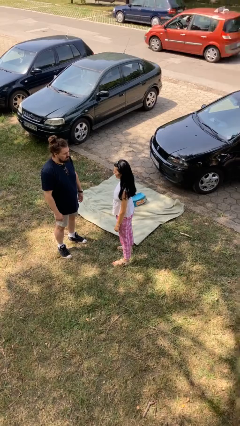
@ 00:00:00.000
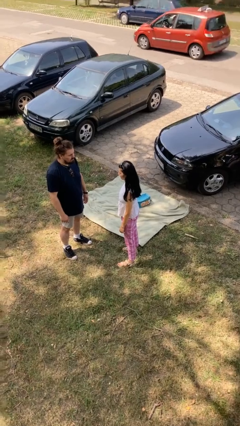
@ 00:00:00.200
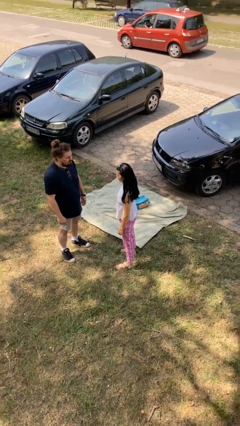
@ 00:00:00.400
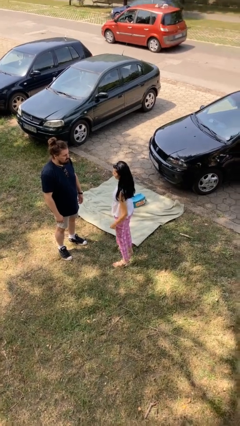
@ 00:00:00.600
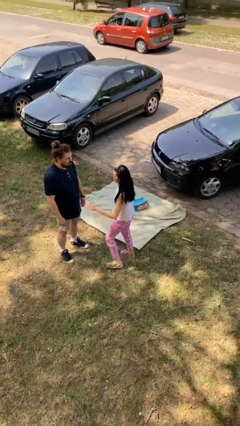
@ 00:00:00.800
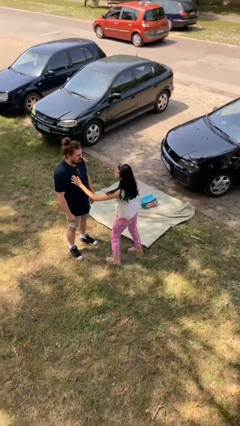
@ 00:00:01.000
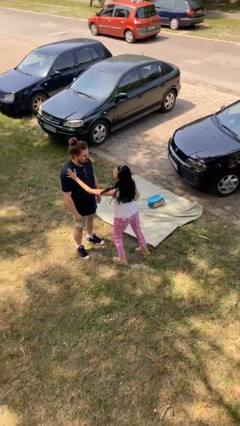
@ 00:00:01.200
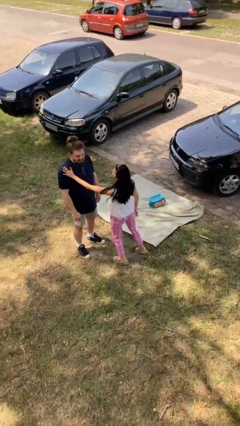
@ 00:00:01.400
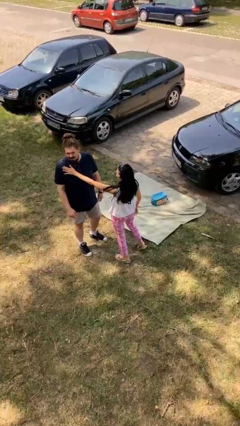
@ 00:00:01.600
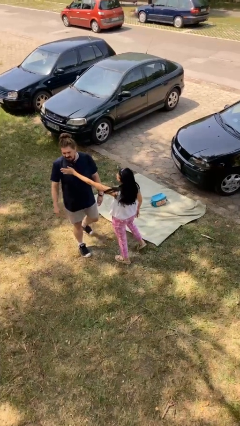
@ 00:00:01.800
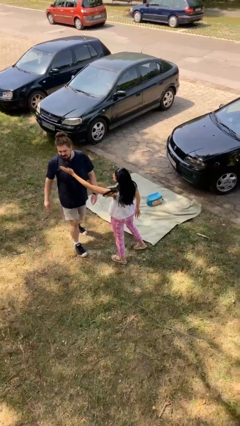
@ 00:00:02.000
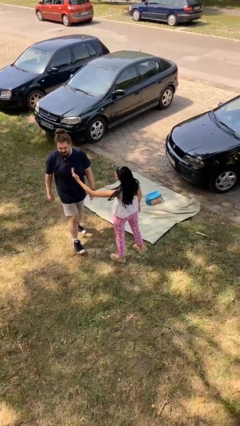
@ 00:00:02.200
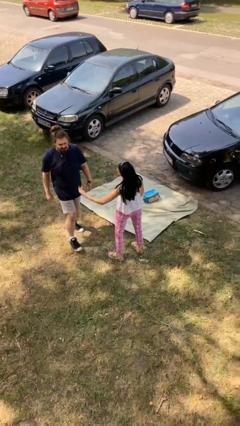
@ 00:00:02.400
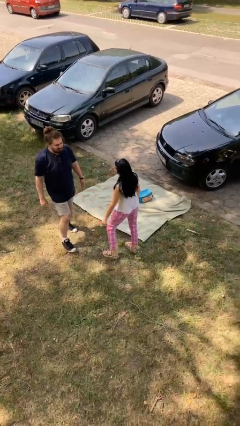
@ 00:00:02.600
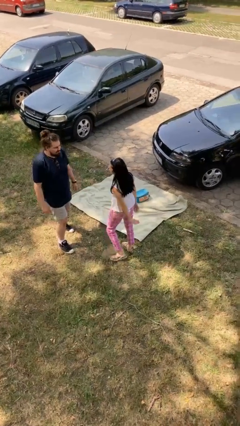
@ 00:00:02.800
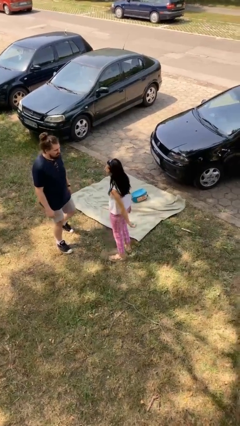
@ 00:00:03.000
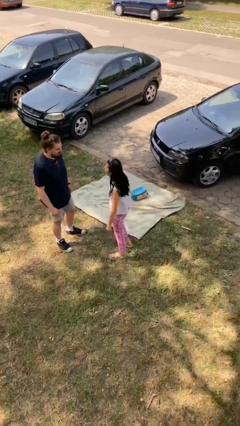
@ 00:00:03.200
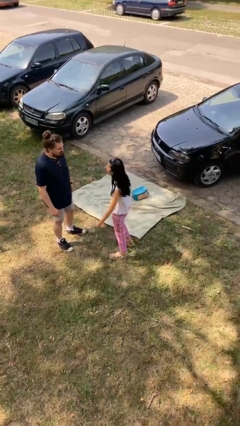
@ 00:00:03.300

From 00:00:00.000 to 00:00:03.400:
person shoves person

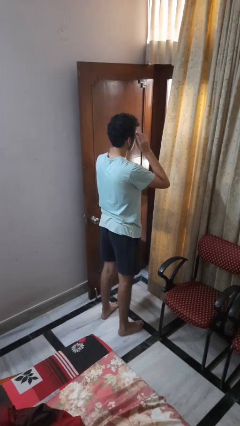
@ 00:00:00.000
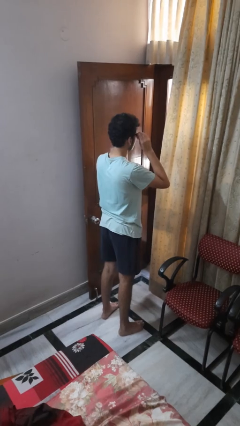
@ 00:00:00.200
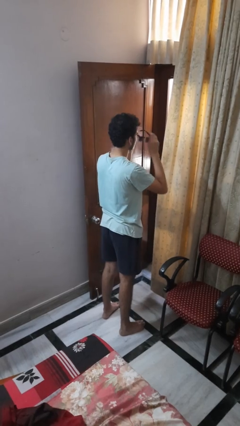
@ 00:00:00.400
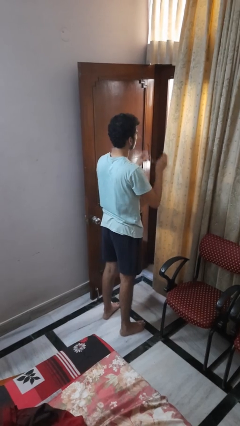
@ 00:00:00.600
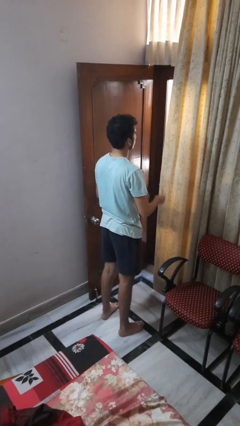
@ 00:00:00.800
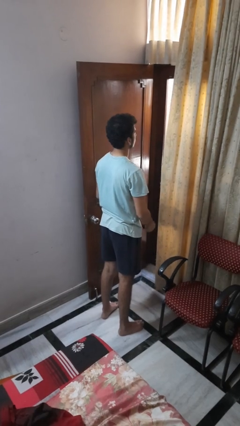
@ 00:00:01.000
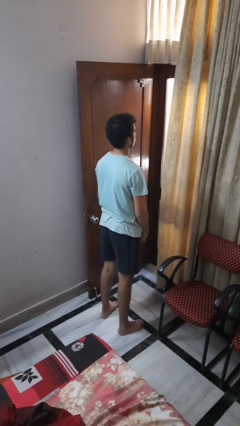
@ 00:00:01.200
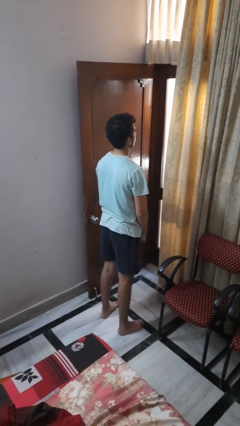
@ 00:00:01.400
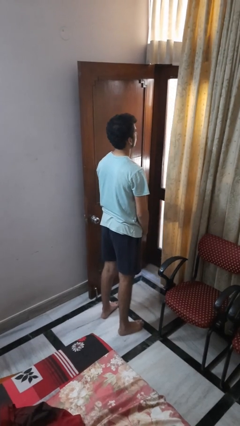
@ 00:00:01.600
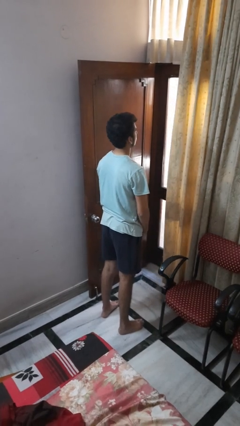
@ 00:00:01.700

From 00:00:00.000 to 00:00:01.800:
person takes off sunglasses

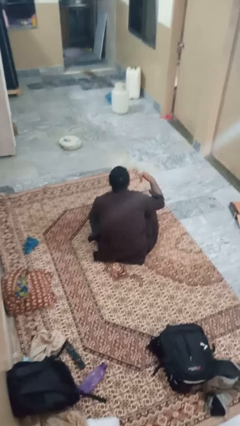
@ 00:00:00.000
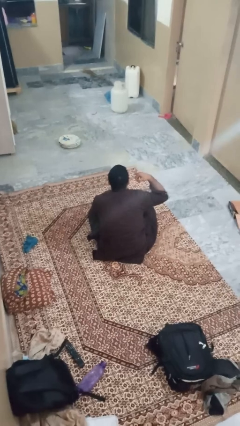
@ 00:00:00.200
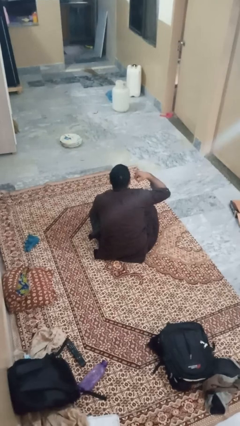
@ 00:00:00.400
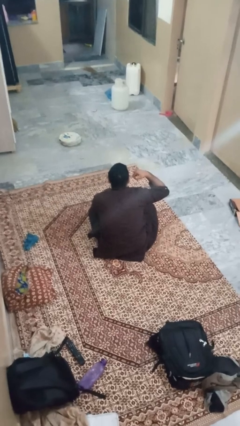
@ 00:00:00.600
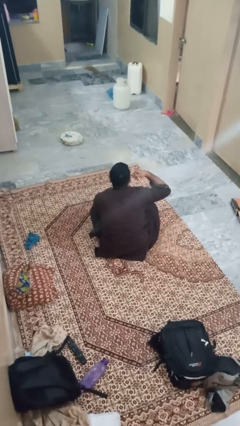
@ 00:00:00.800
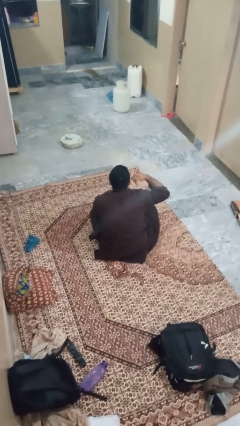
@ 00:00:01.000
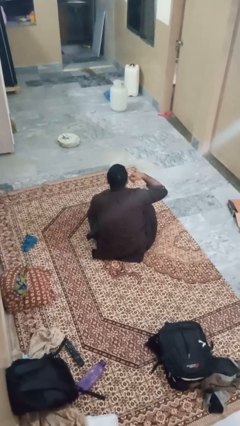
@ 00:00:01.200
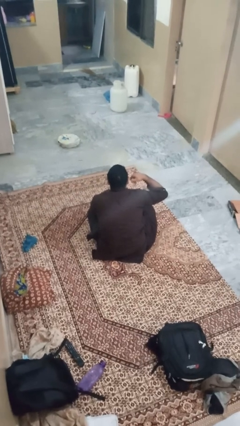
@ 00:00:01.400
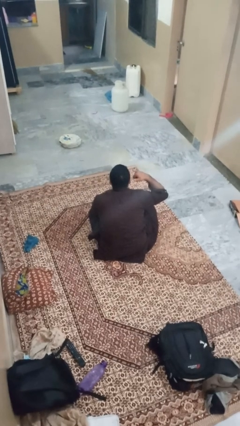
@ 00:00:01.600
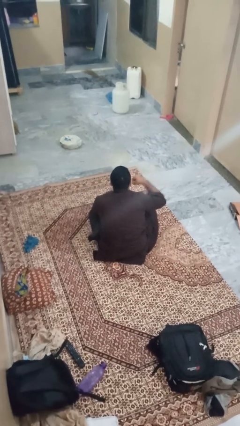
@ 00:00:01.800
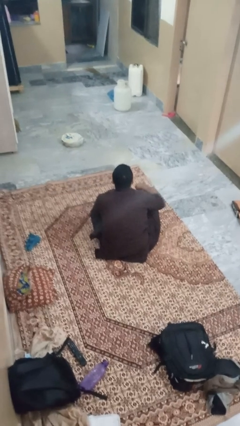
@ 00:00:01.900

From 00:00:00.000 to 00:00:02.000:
person gestures call me

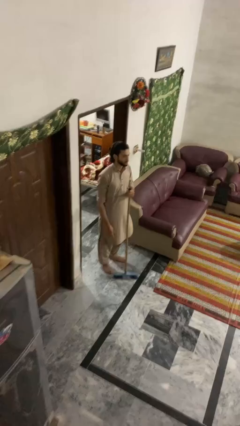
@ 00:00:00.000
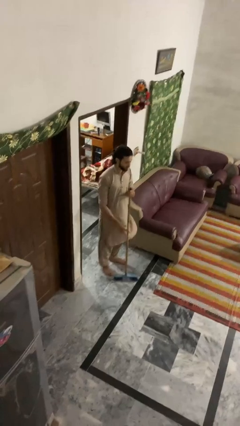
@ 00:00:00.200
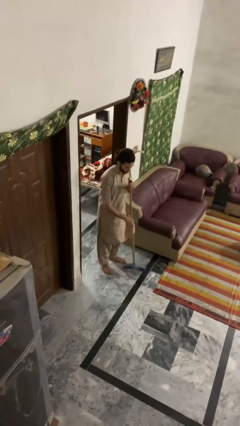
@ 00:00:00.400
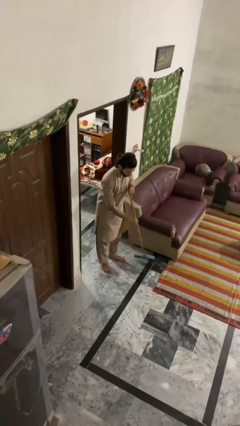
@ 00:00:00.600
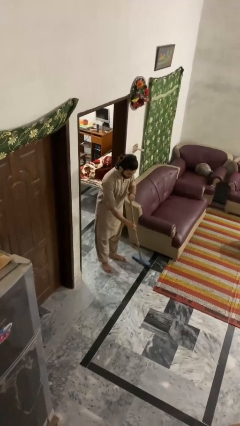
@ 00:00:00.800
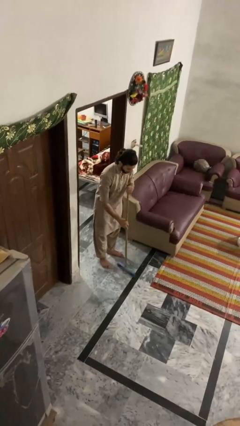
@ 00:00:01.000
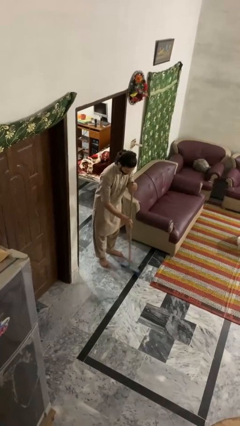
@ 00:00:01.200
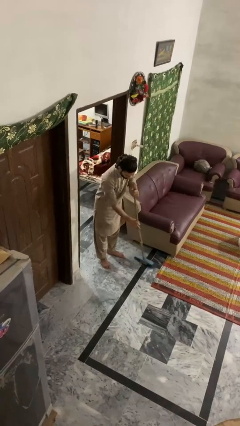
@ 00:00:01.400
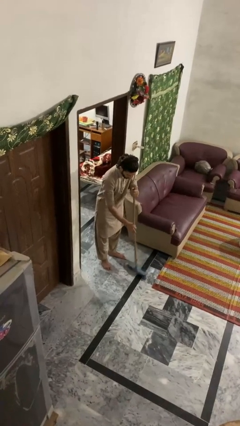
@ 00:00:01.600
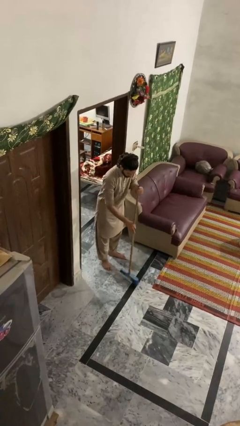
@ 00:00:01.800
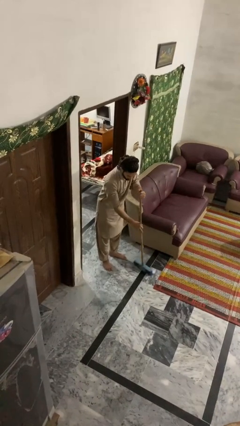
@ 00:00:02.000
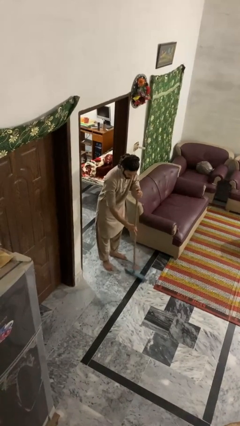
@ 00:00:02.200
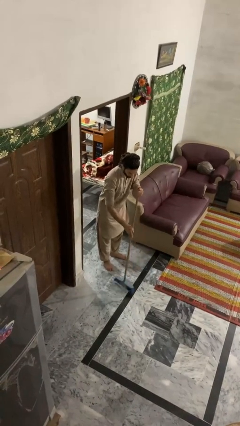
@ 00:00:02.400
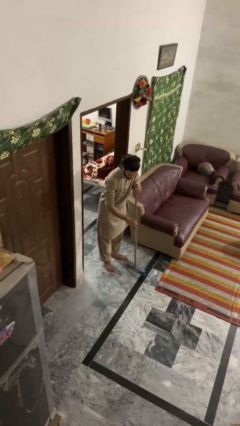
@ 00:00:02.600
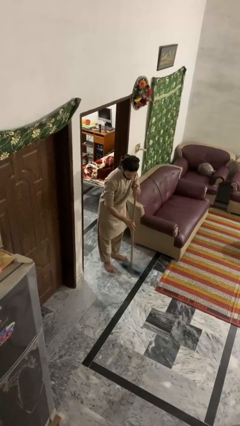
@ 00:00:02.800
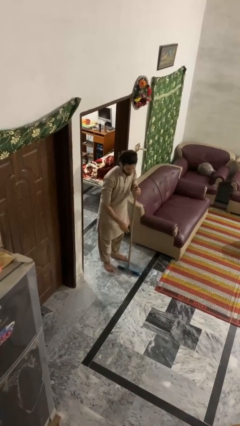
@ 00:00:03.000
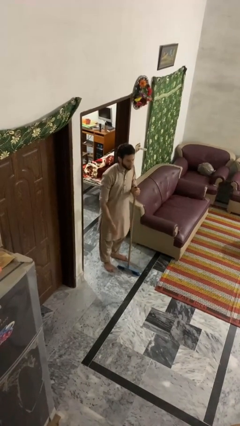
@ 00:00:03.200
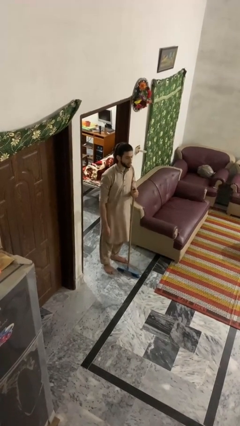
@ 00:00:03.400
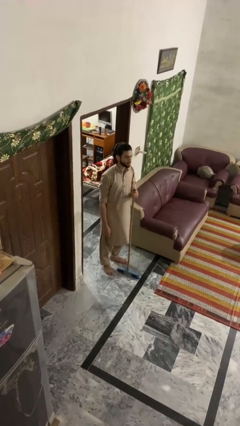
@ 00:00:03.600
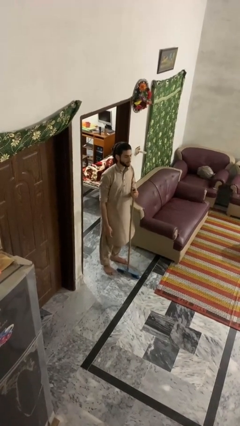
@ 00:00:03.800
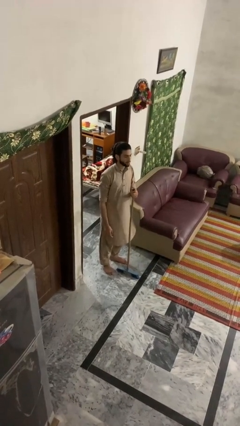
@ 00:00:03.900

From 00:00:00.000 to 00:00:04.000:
person sweeps floor

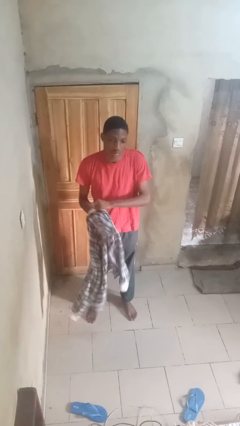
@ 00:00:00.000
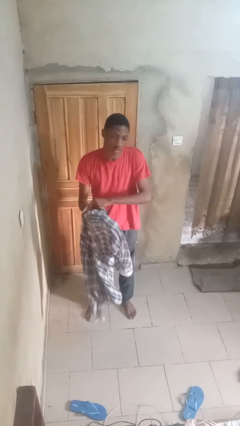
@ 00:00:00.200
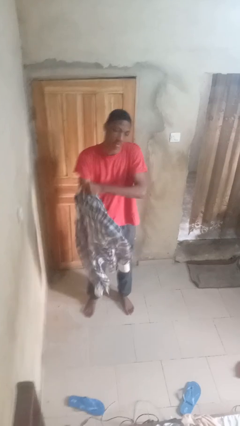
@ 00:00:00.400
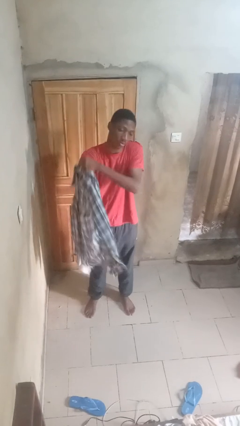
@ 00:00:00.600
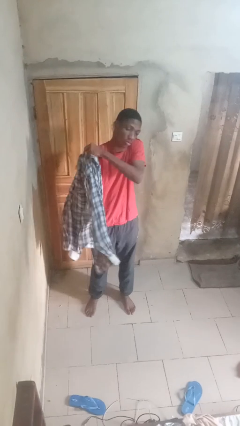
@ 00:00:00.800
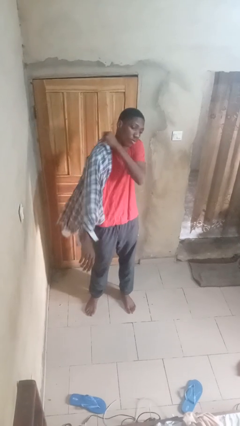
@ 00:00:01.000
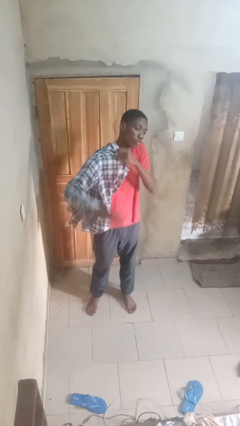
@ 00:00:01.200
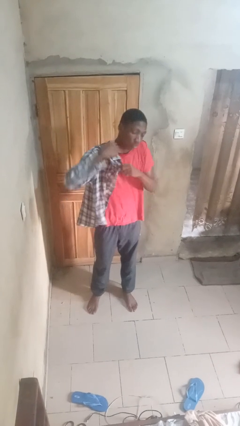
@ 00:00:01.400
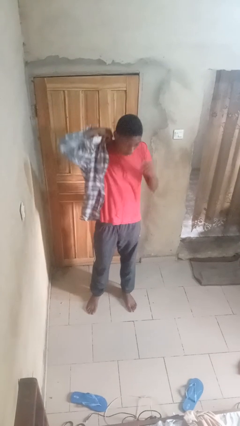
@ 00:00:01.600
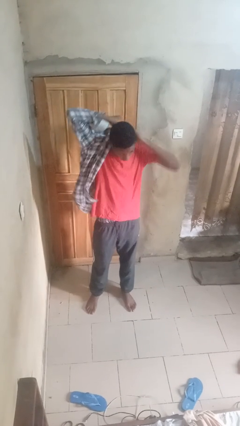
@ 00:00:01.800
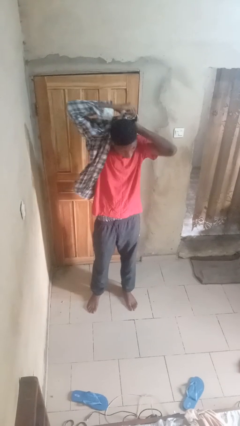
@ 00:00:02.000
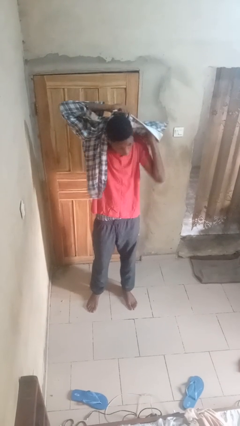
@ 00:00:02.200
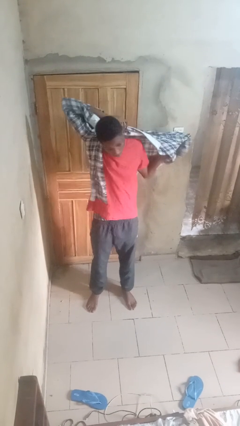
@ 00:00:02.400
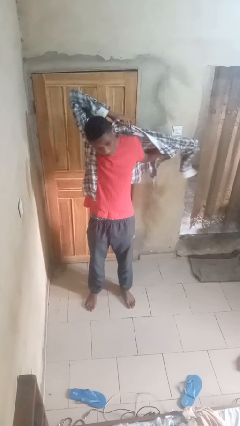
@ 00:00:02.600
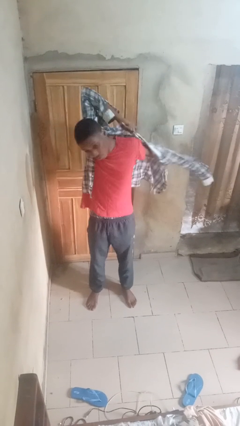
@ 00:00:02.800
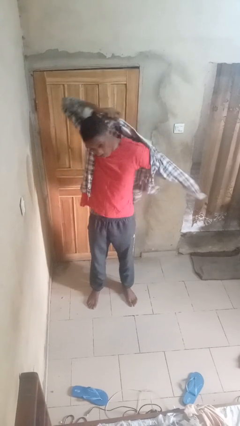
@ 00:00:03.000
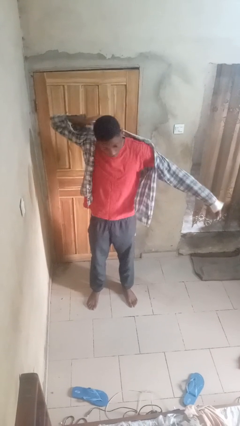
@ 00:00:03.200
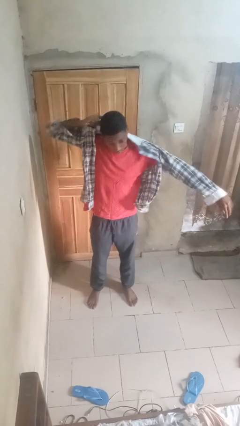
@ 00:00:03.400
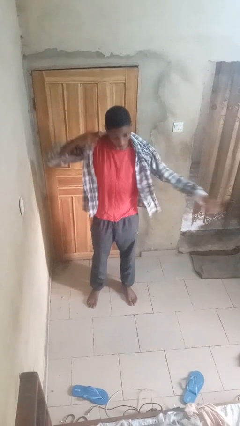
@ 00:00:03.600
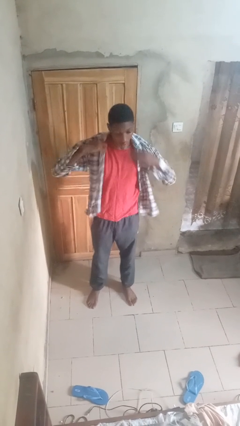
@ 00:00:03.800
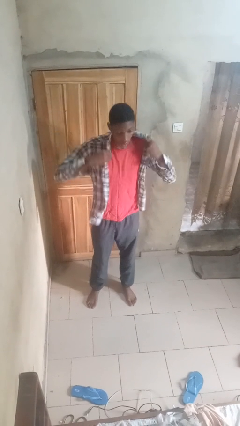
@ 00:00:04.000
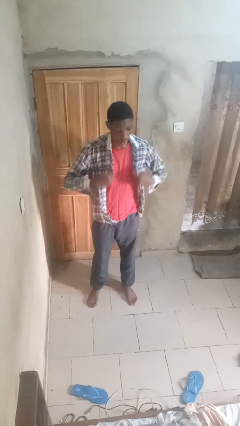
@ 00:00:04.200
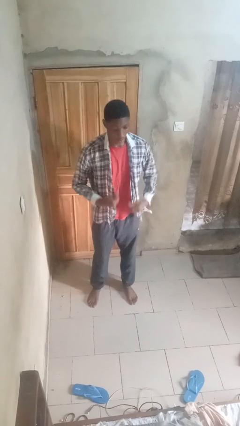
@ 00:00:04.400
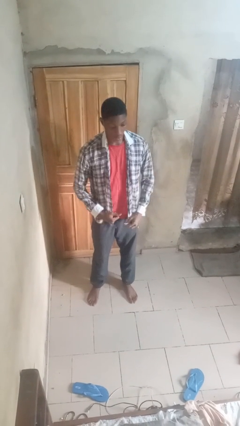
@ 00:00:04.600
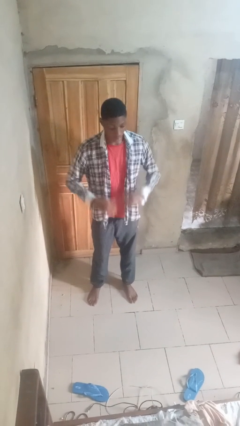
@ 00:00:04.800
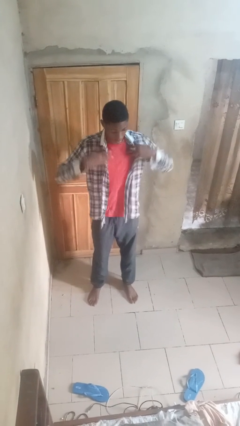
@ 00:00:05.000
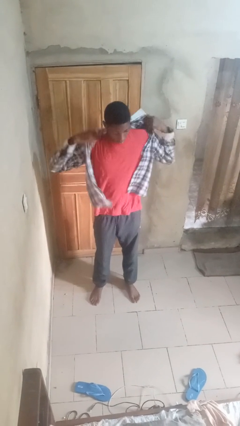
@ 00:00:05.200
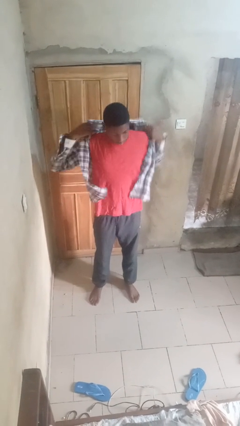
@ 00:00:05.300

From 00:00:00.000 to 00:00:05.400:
person puts on shirt

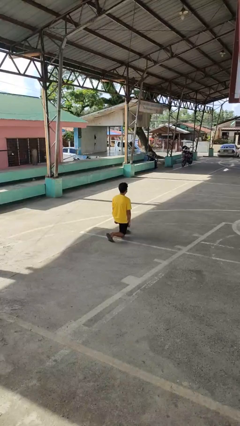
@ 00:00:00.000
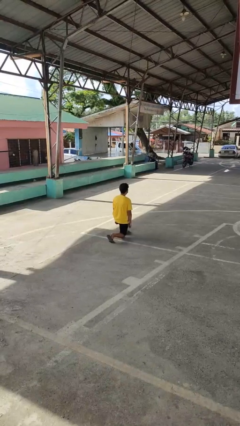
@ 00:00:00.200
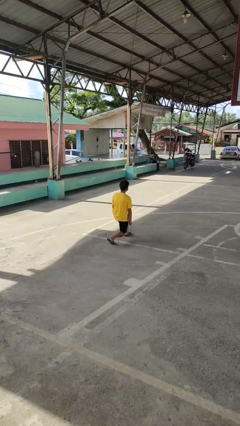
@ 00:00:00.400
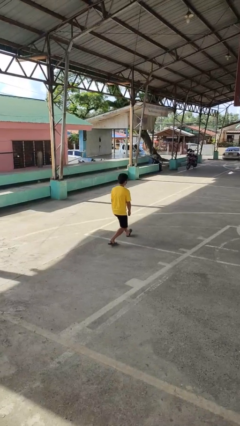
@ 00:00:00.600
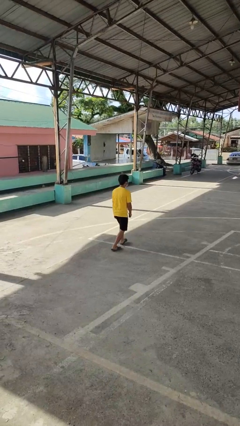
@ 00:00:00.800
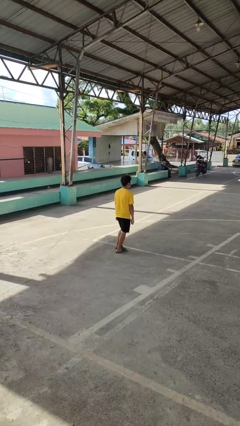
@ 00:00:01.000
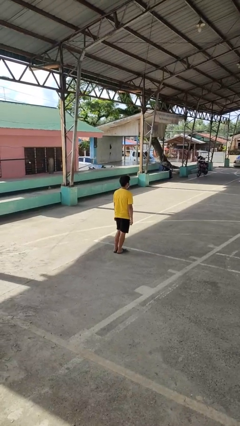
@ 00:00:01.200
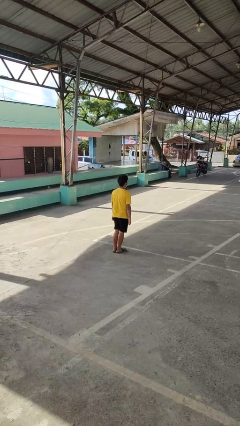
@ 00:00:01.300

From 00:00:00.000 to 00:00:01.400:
person stands up from floor
